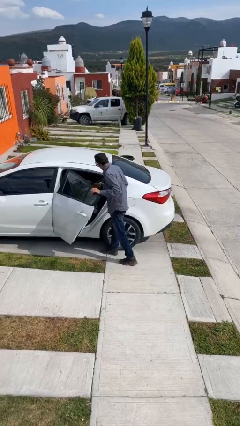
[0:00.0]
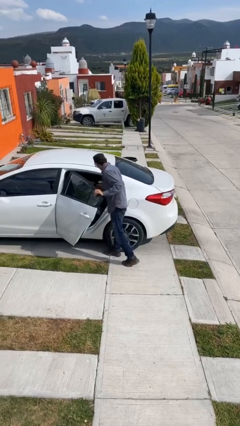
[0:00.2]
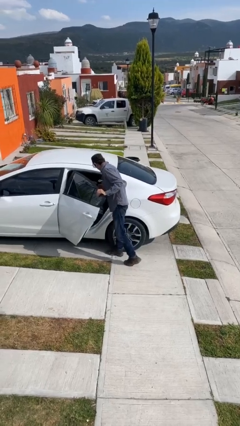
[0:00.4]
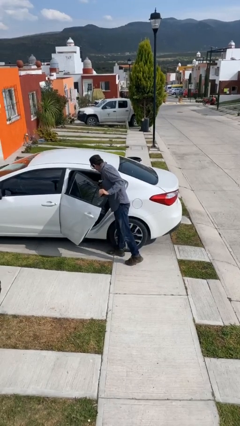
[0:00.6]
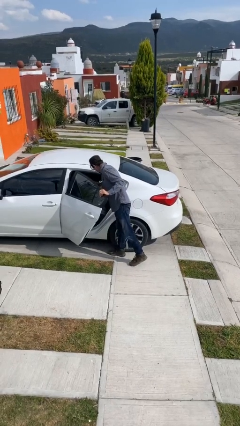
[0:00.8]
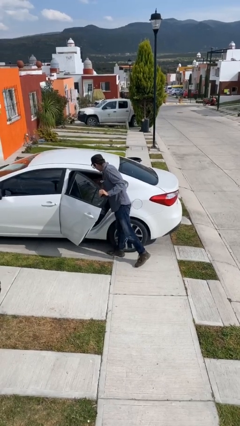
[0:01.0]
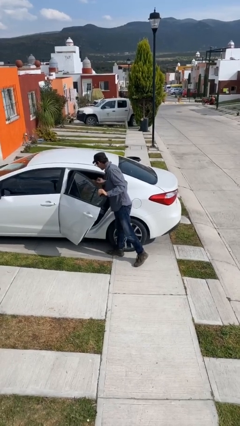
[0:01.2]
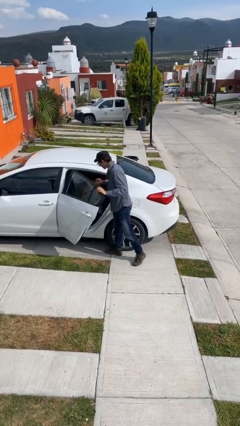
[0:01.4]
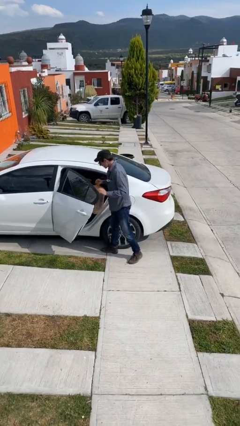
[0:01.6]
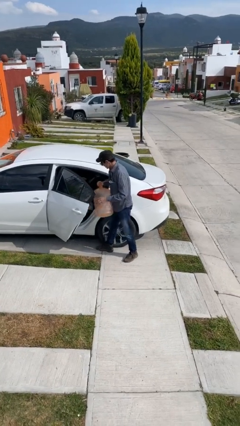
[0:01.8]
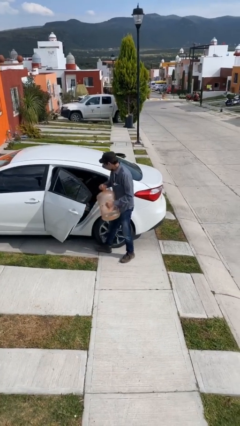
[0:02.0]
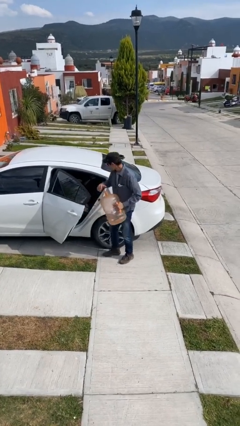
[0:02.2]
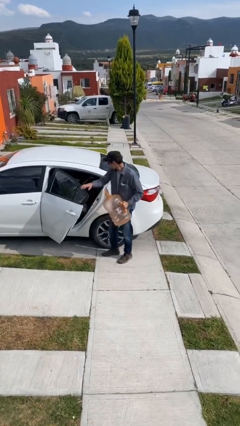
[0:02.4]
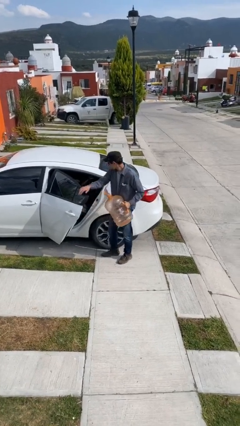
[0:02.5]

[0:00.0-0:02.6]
person unloads car

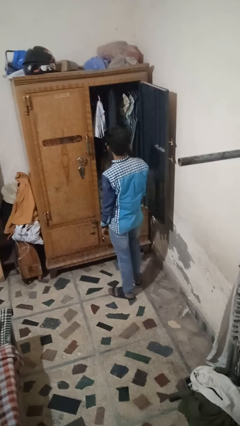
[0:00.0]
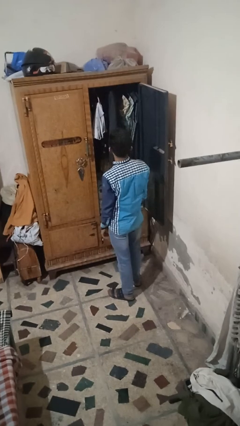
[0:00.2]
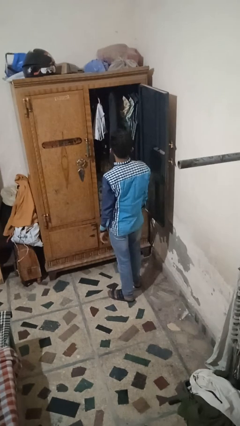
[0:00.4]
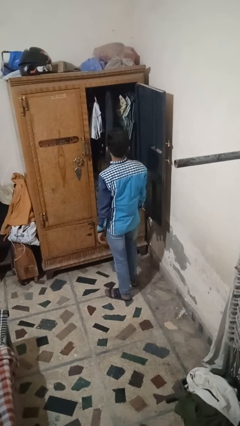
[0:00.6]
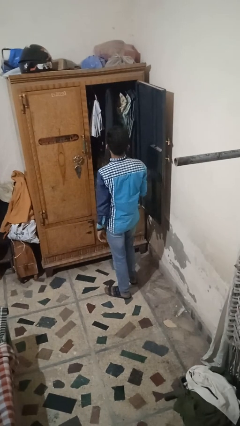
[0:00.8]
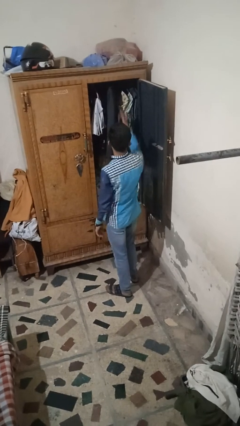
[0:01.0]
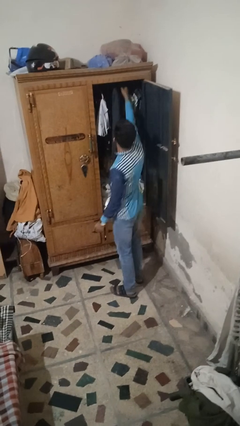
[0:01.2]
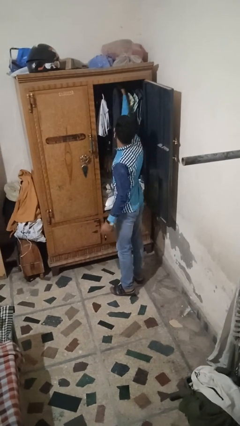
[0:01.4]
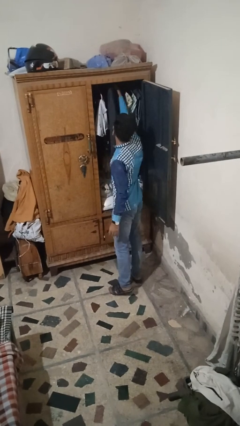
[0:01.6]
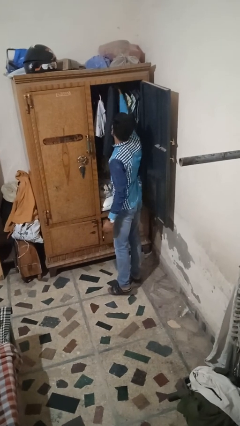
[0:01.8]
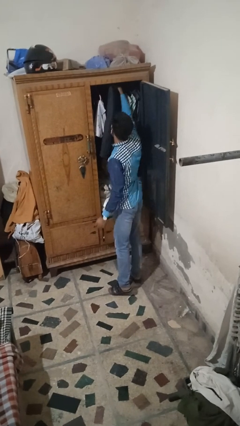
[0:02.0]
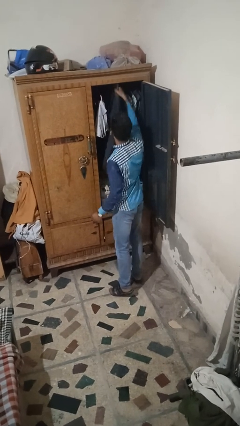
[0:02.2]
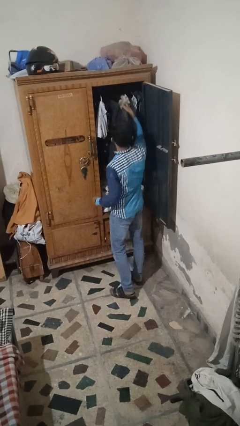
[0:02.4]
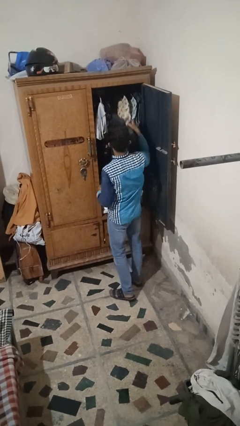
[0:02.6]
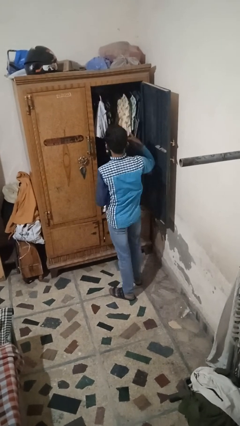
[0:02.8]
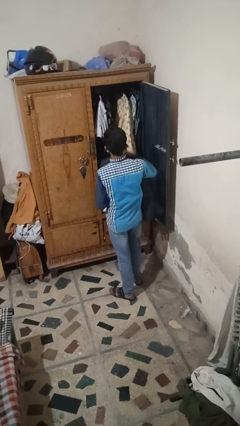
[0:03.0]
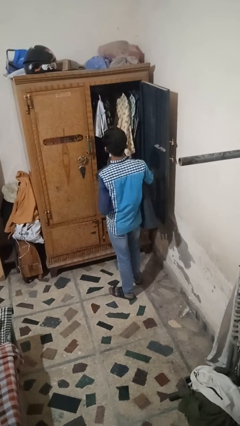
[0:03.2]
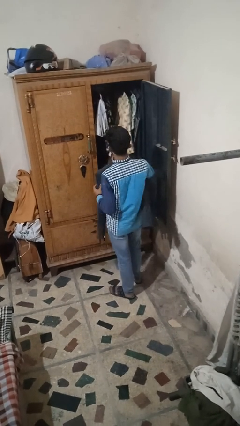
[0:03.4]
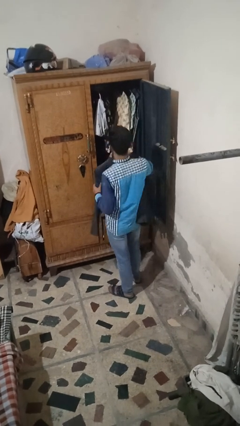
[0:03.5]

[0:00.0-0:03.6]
person takes clothes from closet

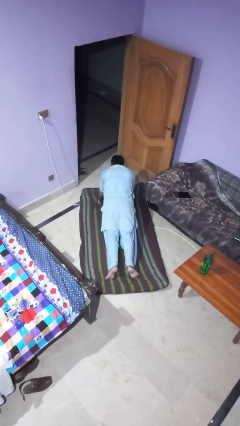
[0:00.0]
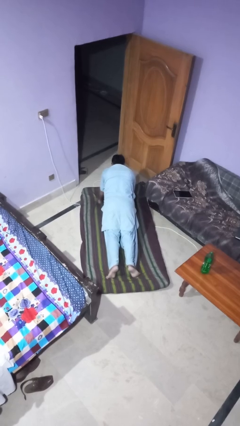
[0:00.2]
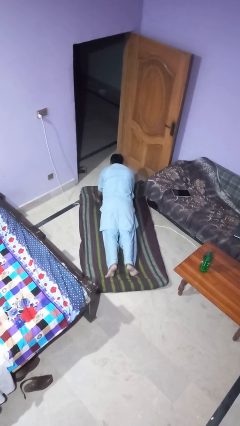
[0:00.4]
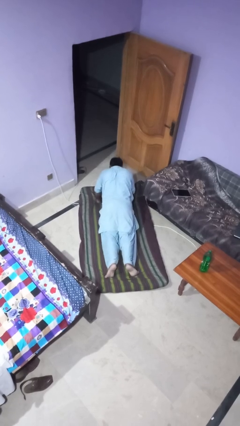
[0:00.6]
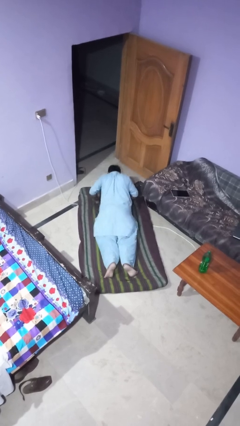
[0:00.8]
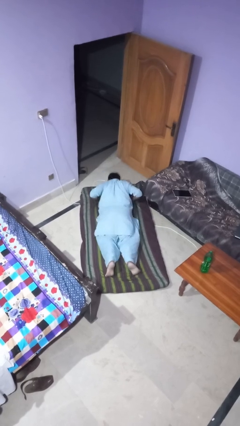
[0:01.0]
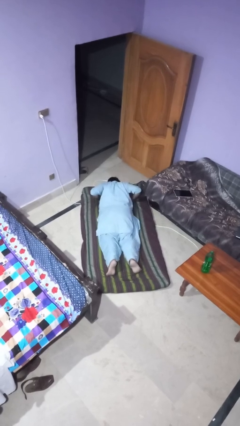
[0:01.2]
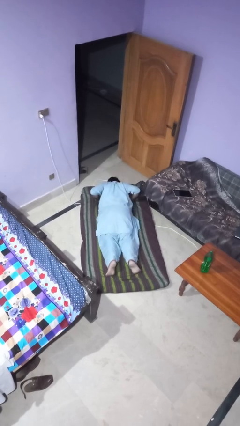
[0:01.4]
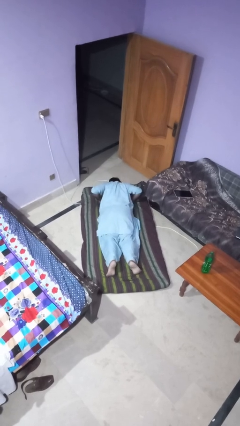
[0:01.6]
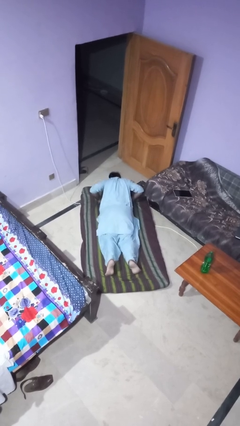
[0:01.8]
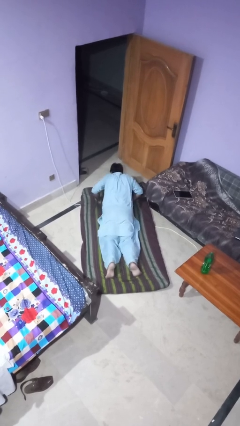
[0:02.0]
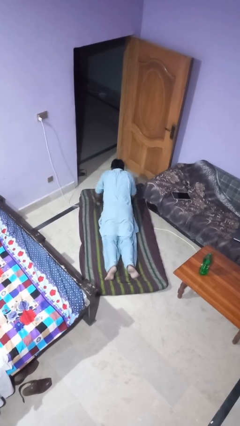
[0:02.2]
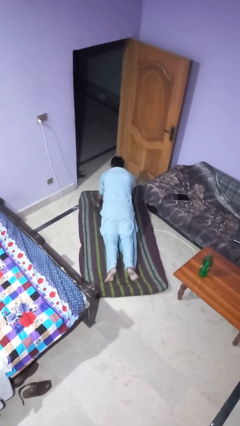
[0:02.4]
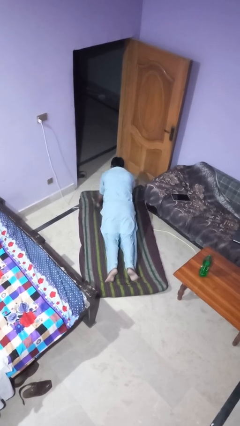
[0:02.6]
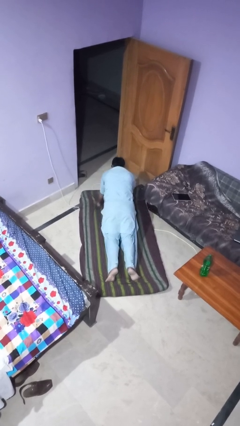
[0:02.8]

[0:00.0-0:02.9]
person exercises with pushup

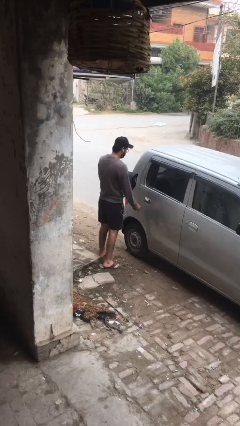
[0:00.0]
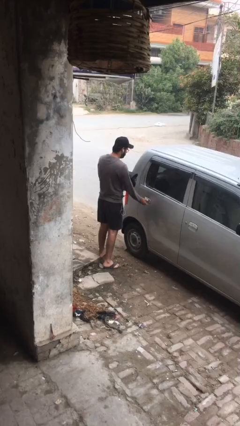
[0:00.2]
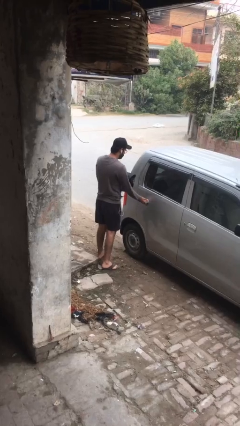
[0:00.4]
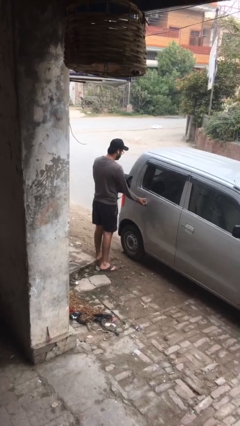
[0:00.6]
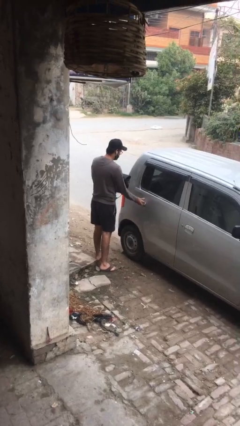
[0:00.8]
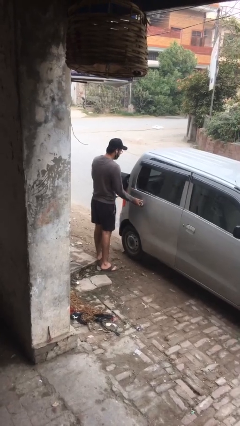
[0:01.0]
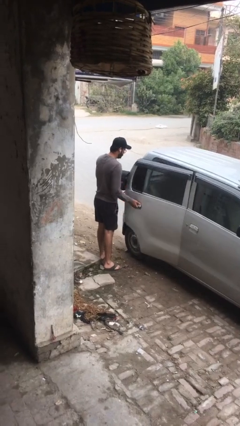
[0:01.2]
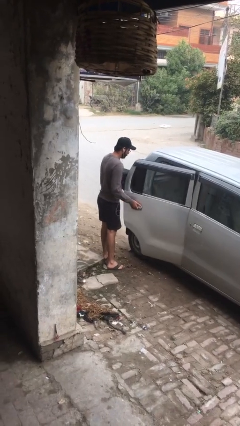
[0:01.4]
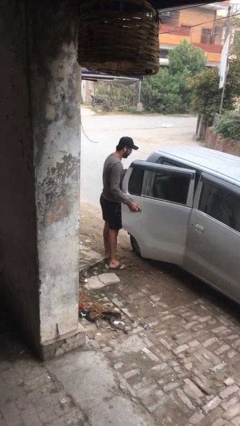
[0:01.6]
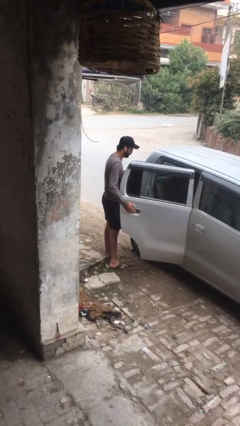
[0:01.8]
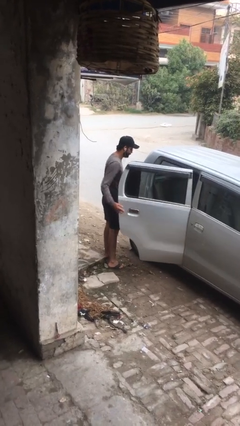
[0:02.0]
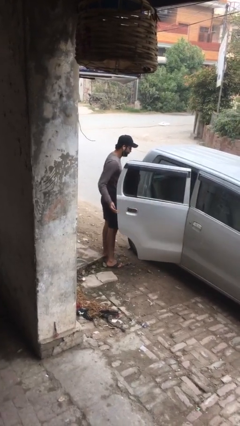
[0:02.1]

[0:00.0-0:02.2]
person opens car door

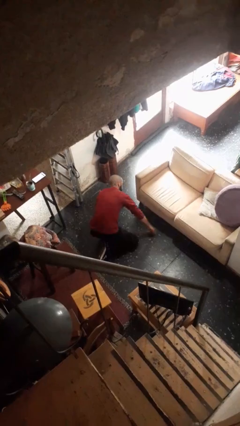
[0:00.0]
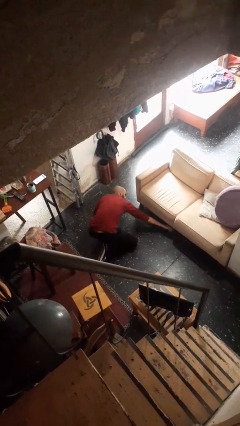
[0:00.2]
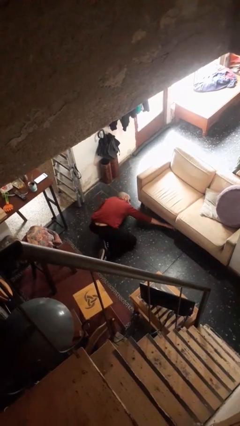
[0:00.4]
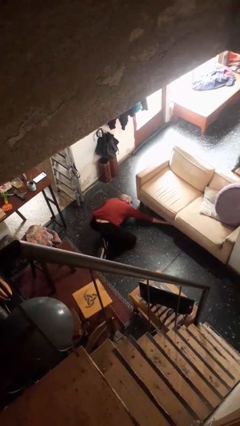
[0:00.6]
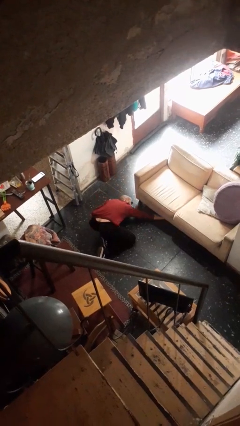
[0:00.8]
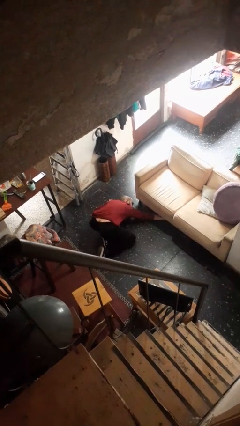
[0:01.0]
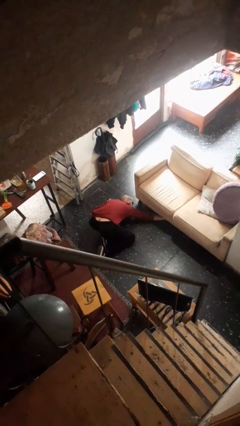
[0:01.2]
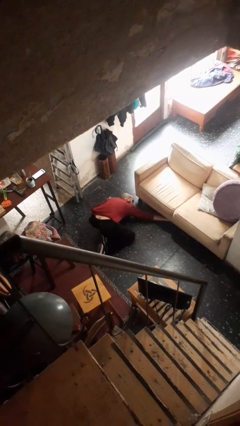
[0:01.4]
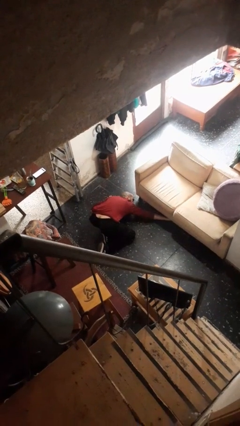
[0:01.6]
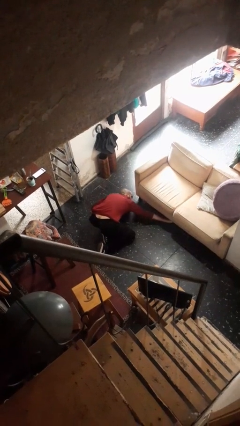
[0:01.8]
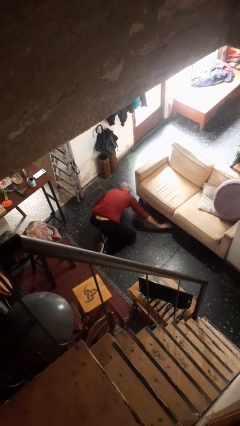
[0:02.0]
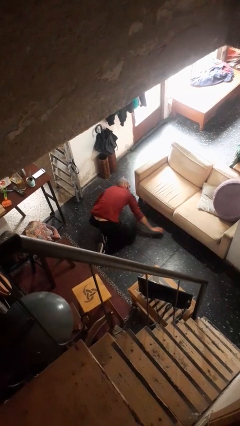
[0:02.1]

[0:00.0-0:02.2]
person searches under couch

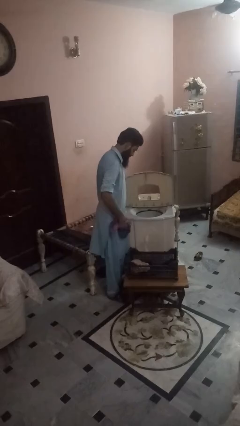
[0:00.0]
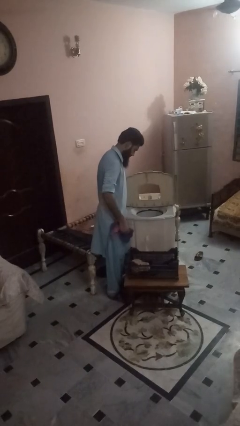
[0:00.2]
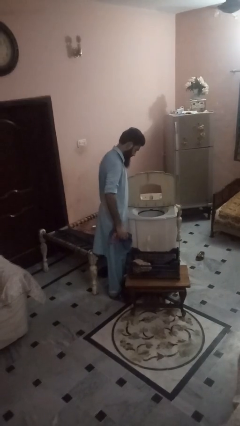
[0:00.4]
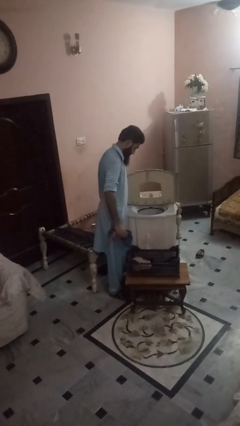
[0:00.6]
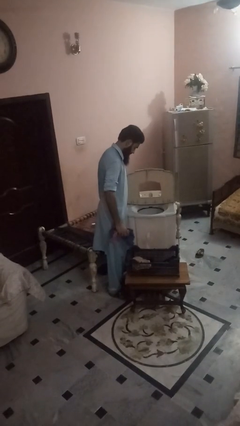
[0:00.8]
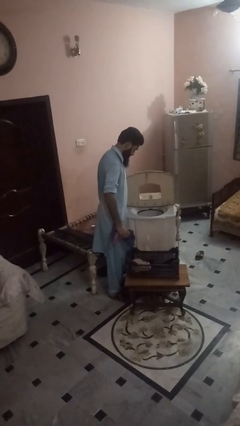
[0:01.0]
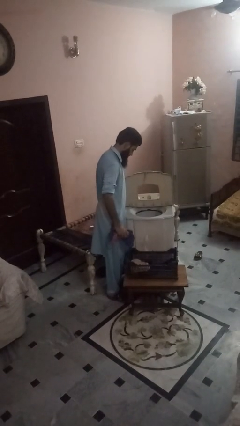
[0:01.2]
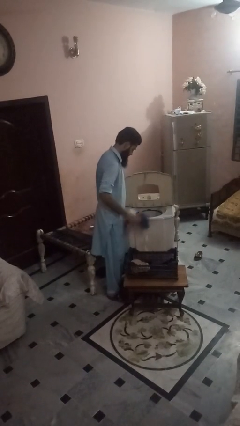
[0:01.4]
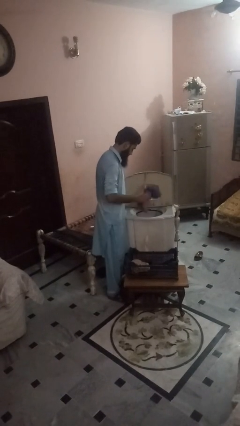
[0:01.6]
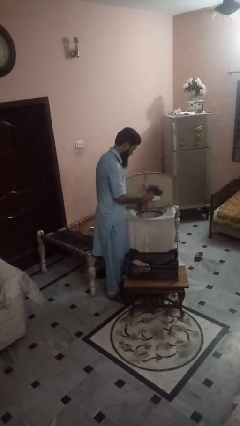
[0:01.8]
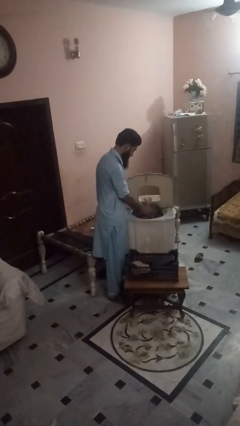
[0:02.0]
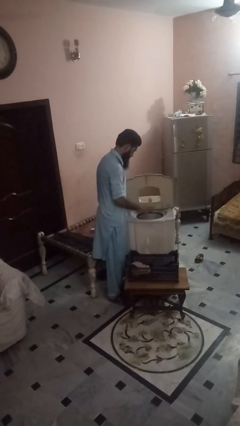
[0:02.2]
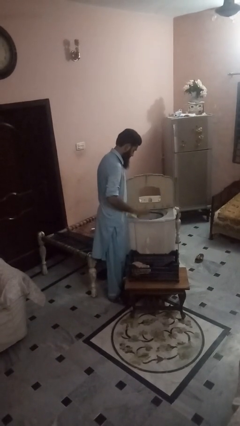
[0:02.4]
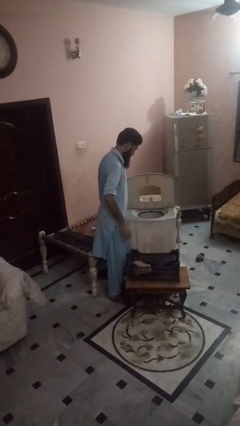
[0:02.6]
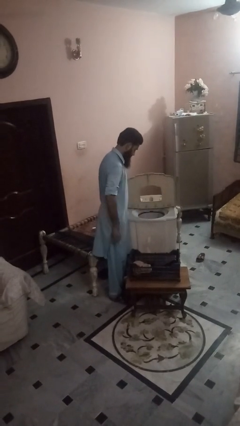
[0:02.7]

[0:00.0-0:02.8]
person loads dishwasher

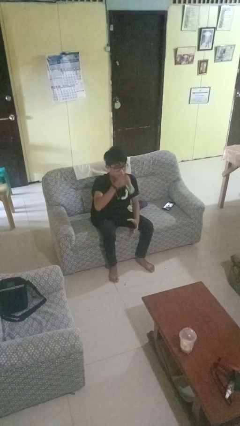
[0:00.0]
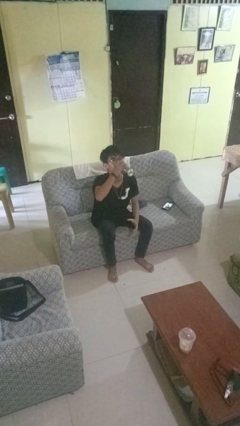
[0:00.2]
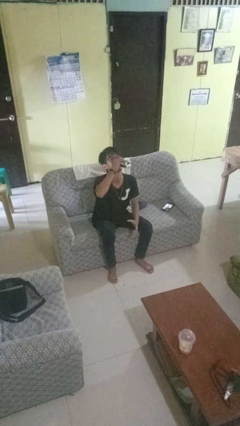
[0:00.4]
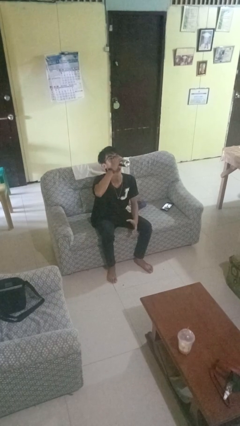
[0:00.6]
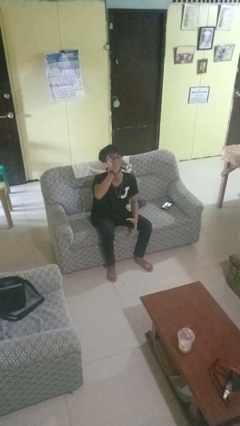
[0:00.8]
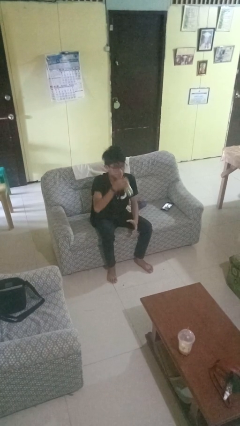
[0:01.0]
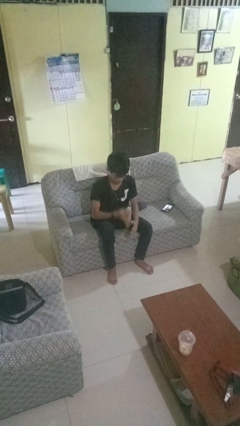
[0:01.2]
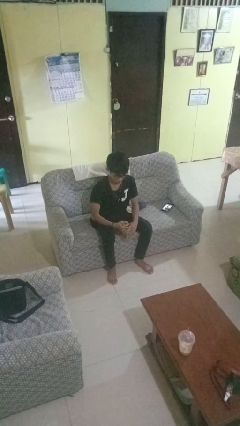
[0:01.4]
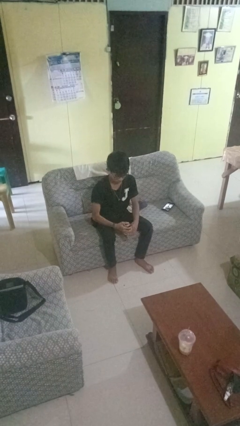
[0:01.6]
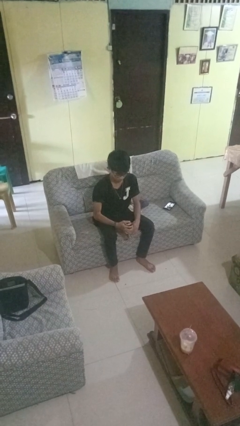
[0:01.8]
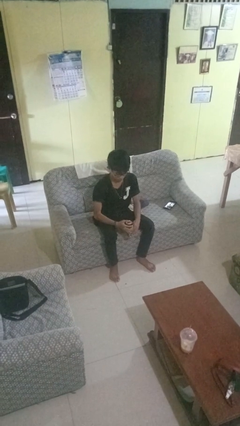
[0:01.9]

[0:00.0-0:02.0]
person drinks from beverage can
